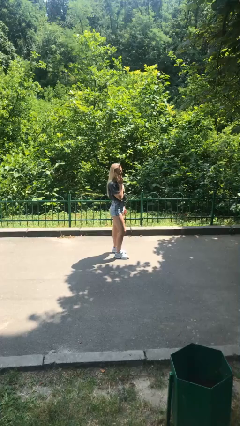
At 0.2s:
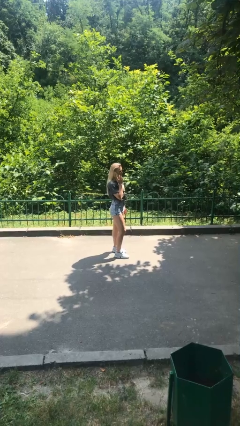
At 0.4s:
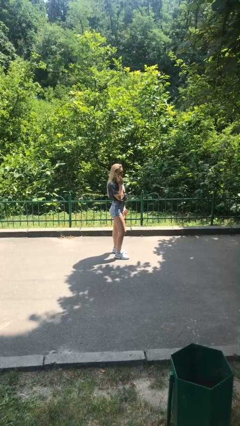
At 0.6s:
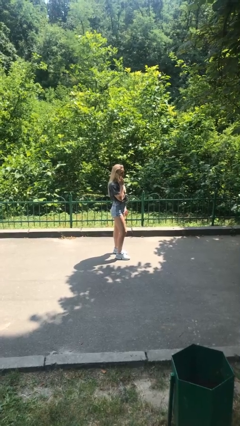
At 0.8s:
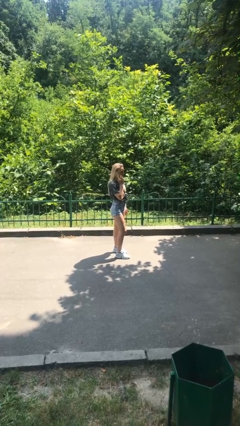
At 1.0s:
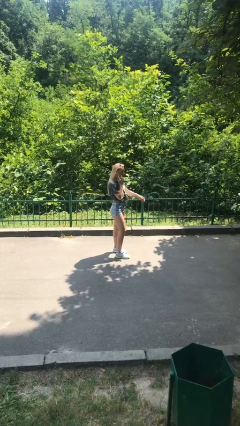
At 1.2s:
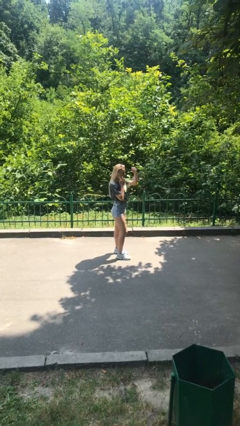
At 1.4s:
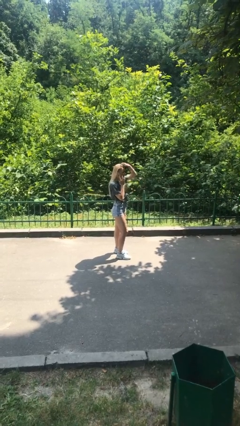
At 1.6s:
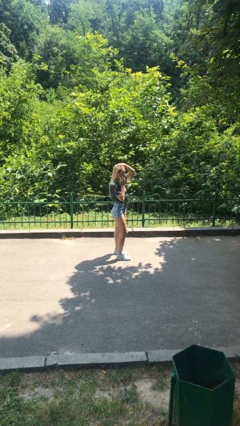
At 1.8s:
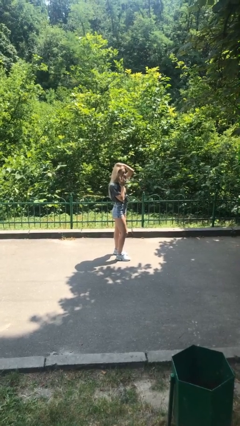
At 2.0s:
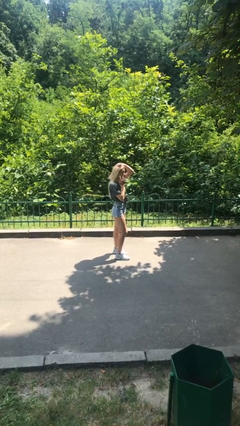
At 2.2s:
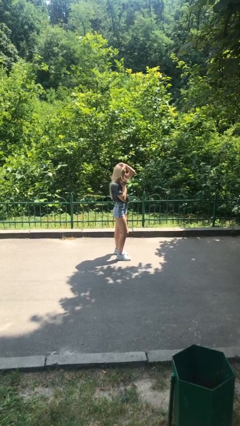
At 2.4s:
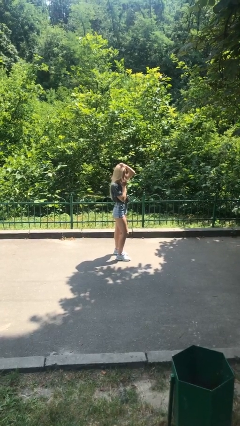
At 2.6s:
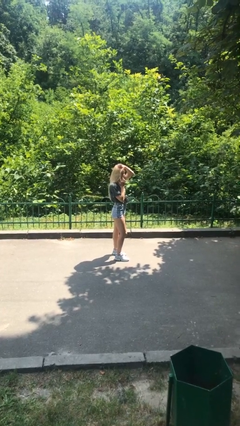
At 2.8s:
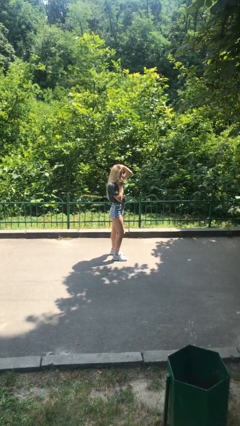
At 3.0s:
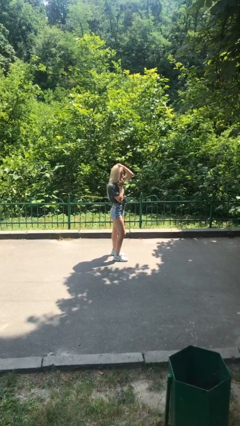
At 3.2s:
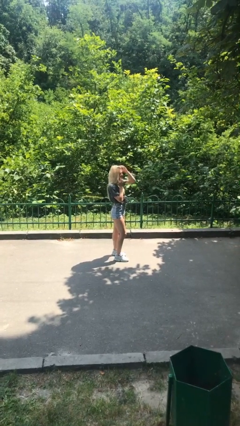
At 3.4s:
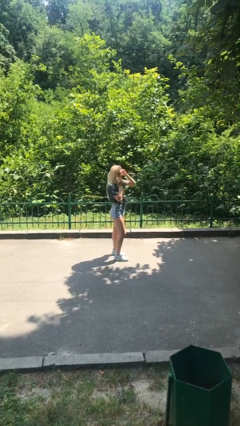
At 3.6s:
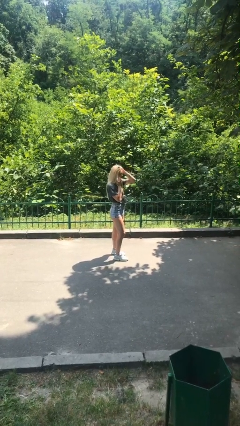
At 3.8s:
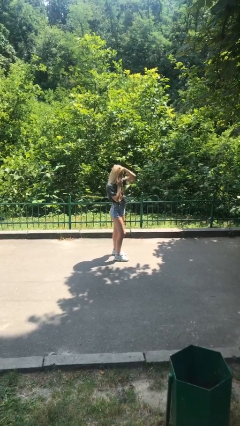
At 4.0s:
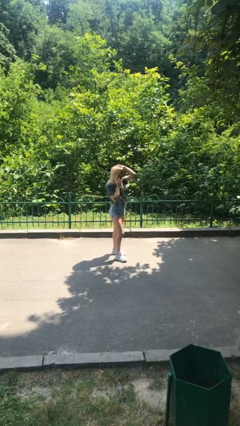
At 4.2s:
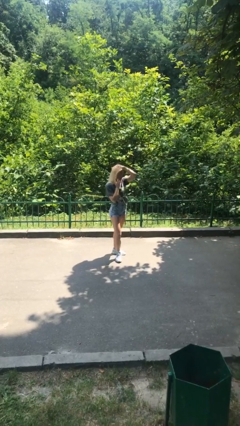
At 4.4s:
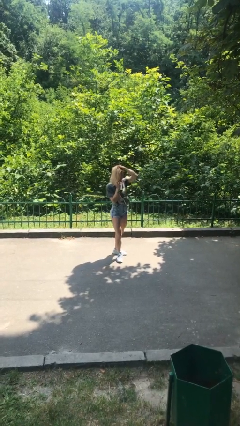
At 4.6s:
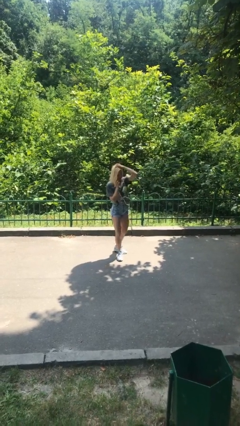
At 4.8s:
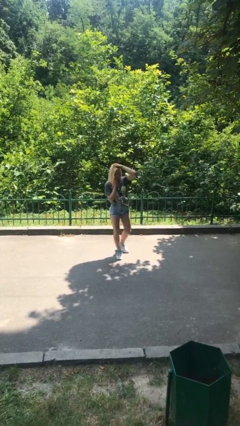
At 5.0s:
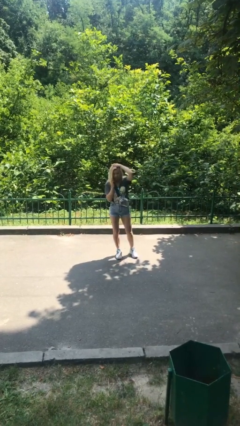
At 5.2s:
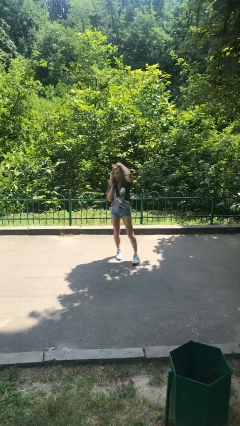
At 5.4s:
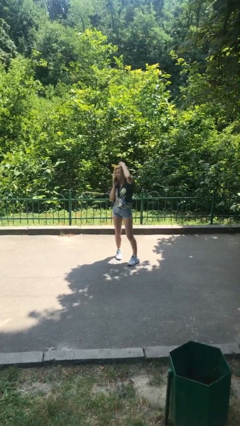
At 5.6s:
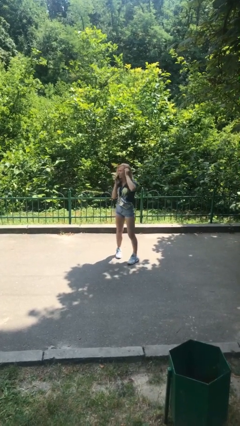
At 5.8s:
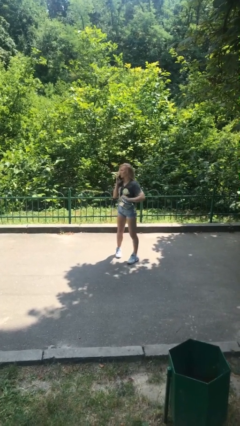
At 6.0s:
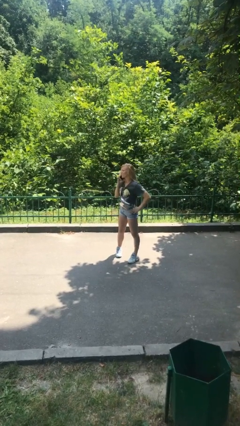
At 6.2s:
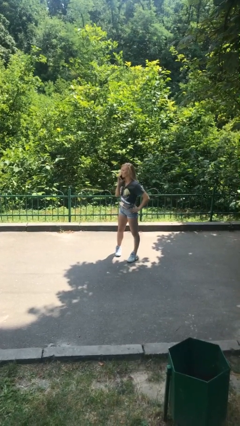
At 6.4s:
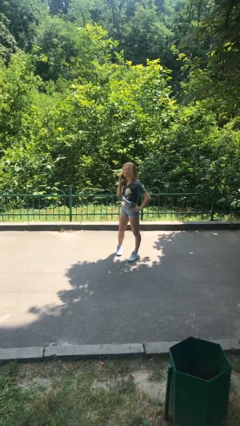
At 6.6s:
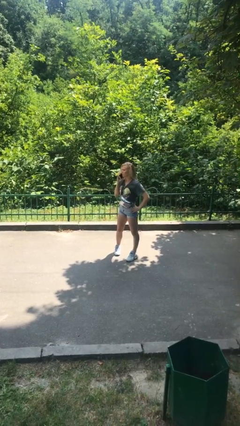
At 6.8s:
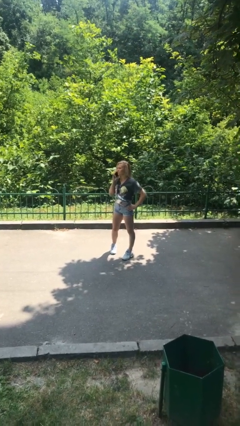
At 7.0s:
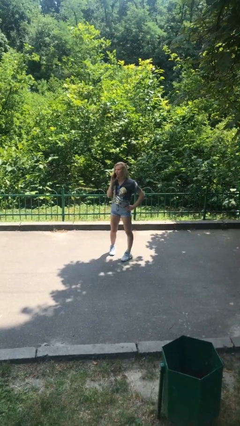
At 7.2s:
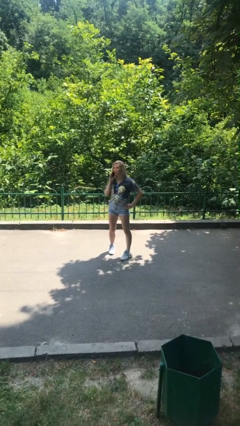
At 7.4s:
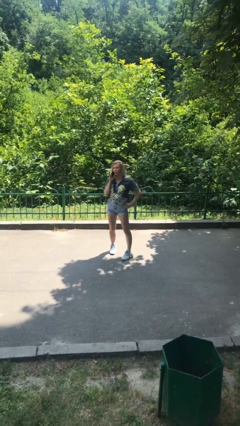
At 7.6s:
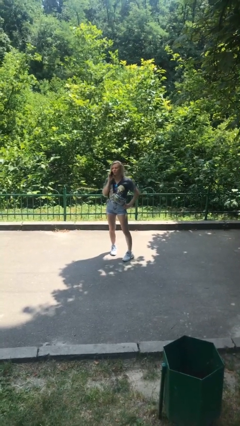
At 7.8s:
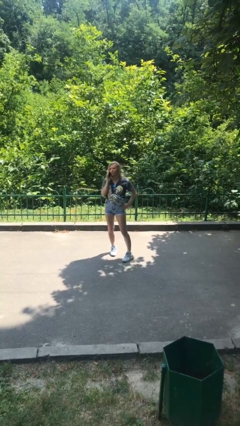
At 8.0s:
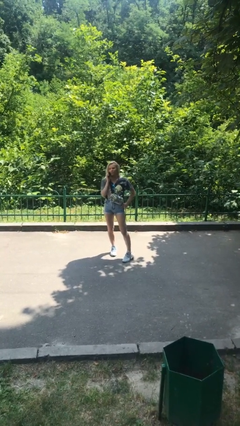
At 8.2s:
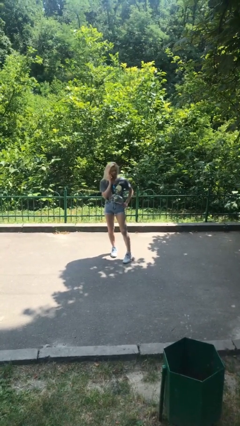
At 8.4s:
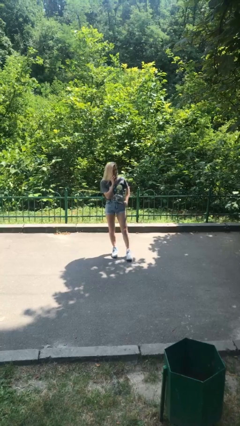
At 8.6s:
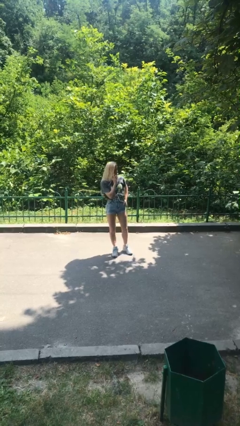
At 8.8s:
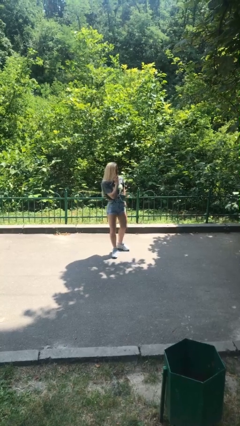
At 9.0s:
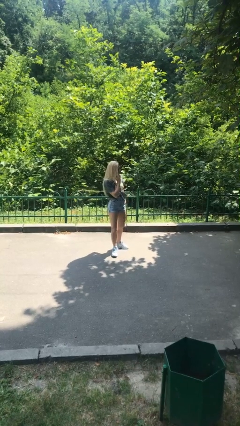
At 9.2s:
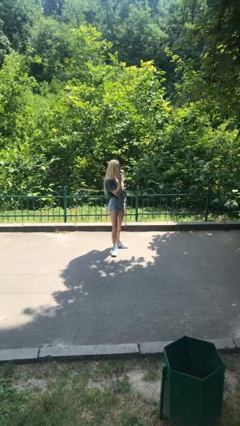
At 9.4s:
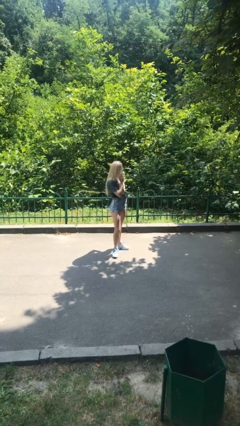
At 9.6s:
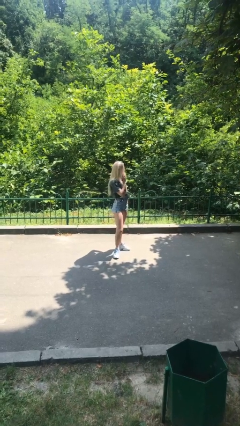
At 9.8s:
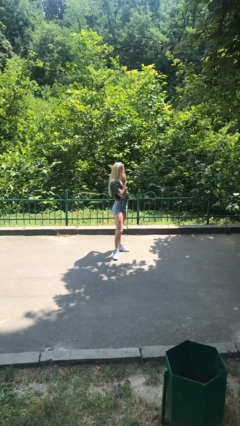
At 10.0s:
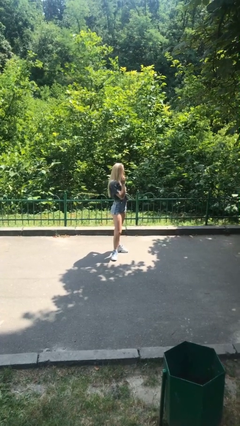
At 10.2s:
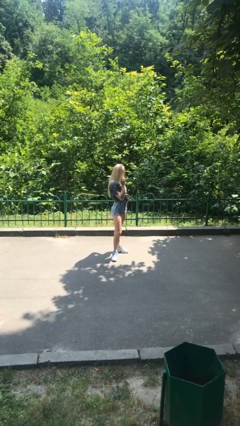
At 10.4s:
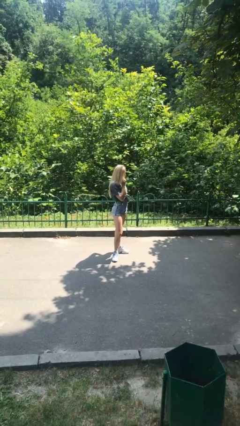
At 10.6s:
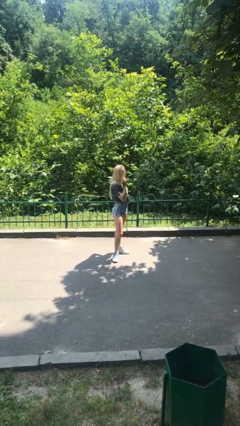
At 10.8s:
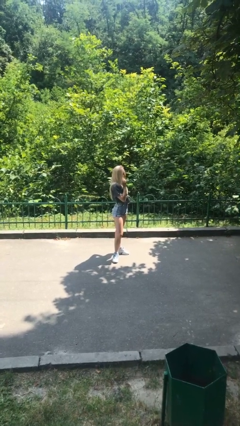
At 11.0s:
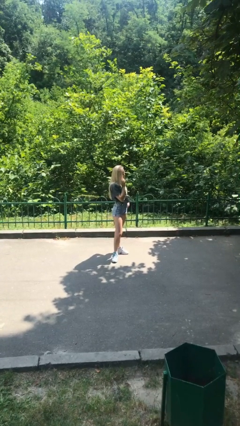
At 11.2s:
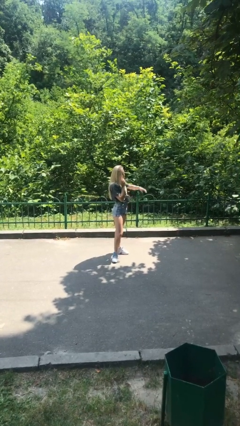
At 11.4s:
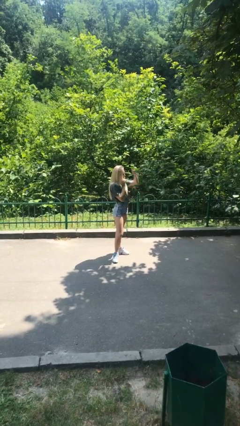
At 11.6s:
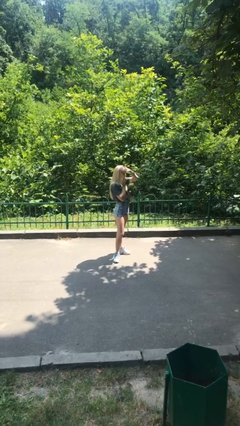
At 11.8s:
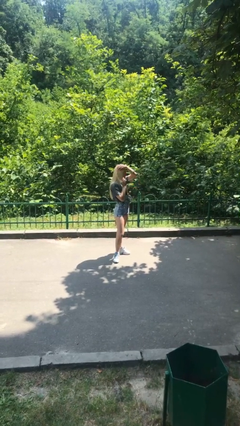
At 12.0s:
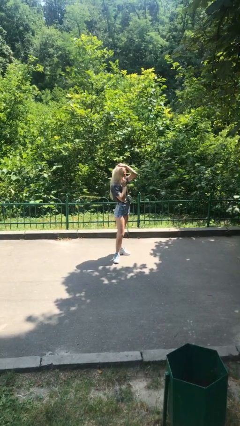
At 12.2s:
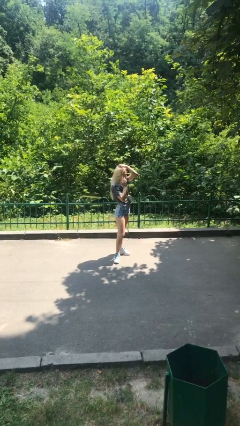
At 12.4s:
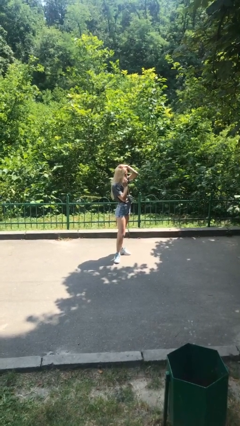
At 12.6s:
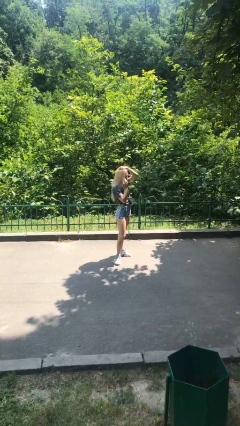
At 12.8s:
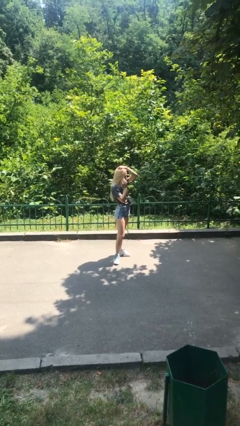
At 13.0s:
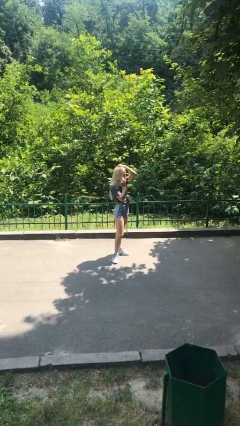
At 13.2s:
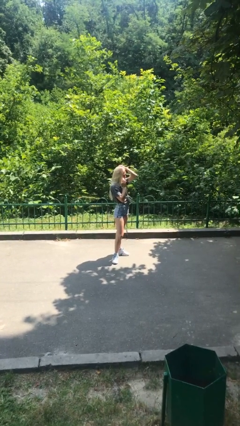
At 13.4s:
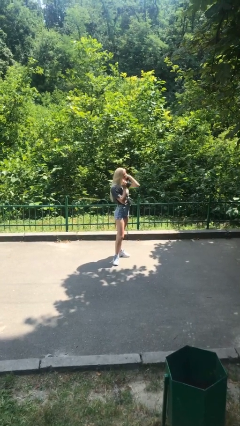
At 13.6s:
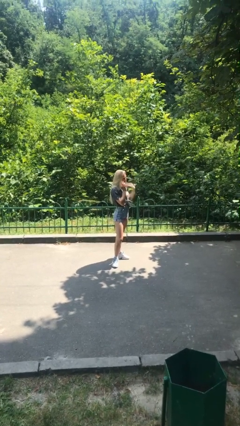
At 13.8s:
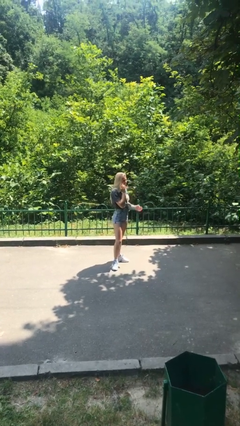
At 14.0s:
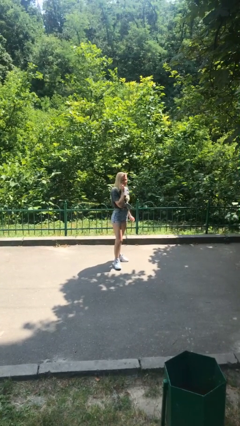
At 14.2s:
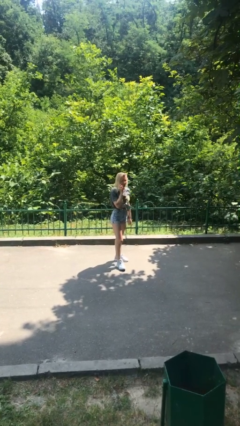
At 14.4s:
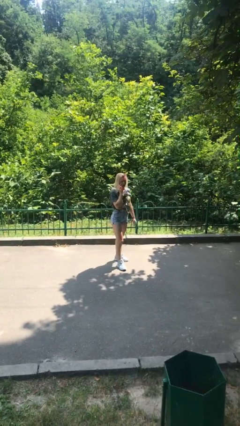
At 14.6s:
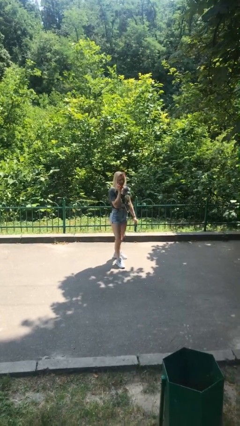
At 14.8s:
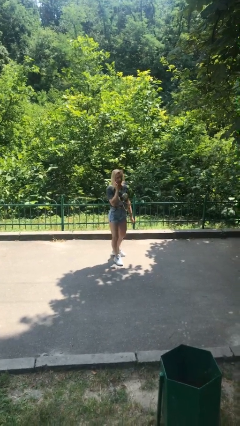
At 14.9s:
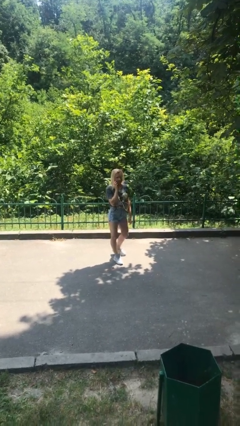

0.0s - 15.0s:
person talks on phone

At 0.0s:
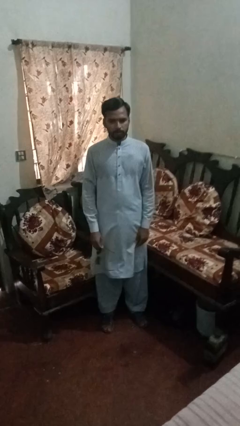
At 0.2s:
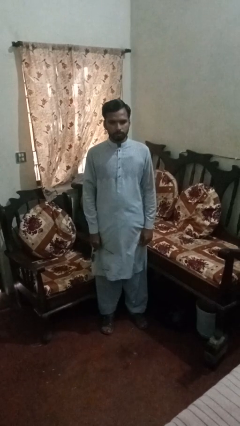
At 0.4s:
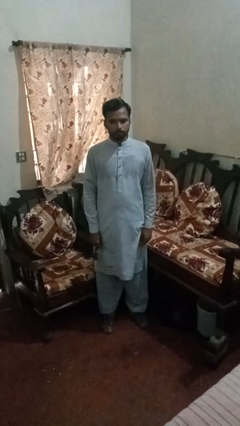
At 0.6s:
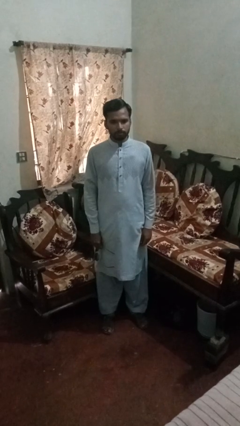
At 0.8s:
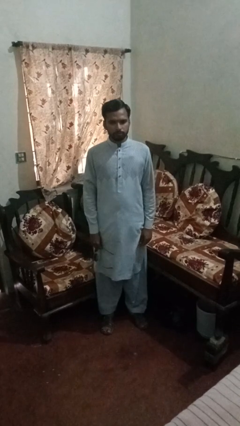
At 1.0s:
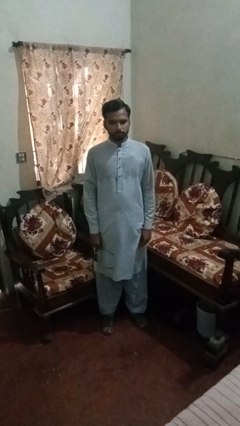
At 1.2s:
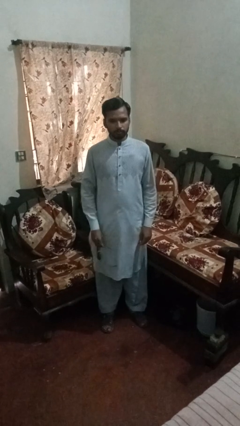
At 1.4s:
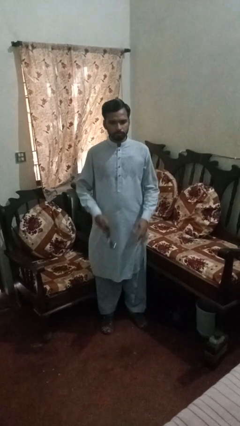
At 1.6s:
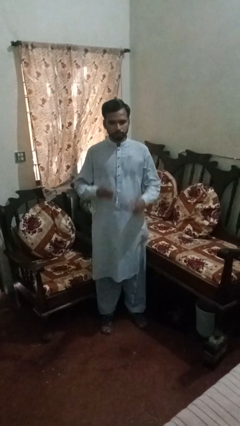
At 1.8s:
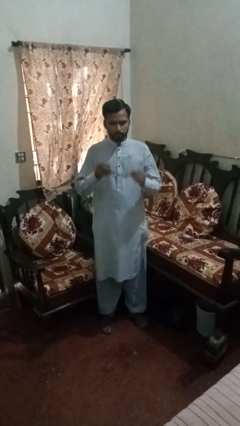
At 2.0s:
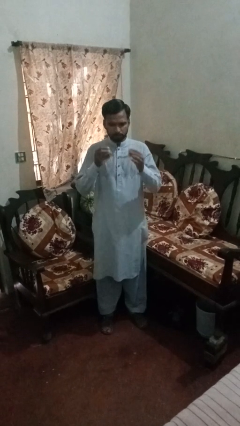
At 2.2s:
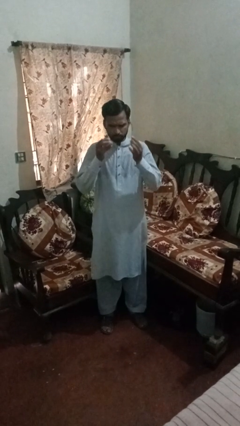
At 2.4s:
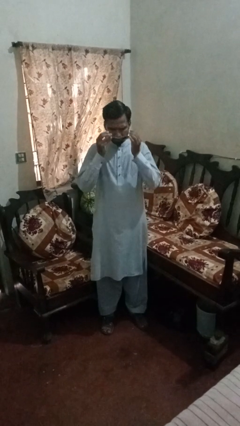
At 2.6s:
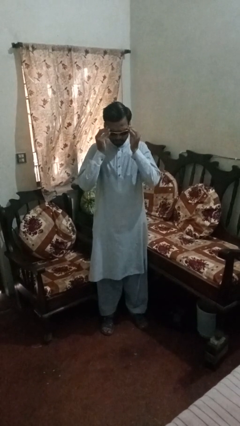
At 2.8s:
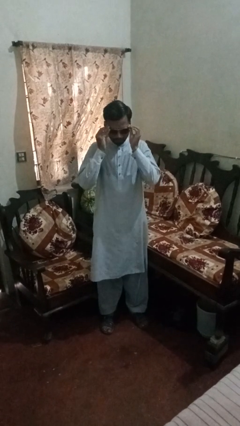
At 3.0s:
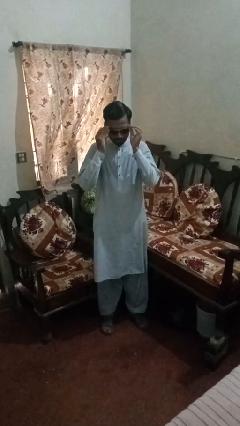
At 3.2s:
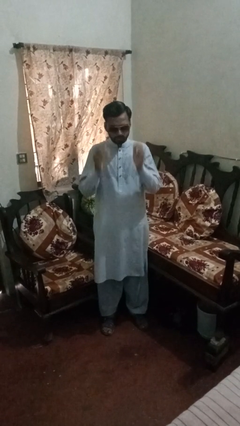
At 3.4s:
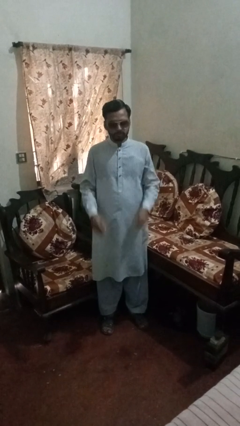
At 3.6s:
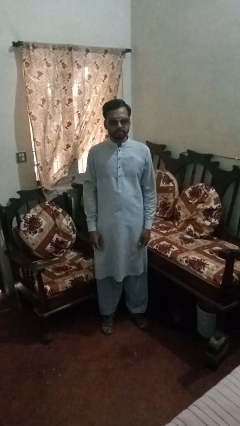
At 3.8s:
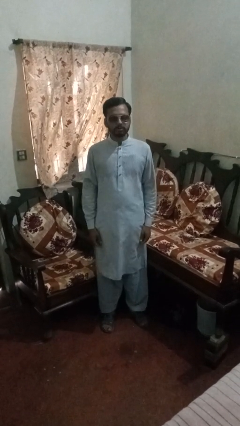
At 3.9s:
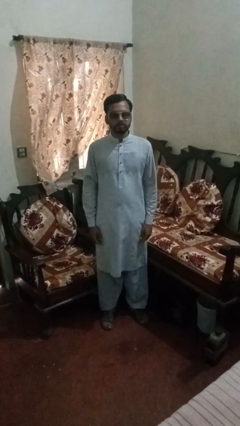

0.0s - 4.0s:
person puts on sunglasses
